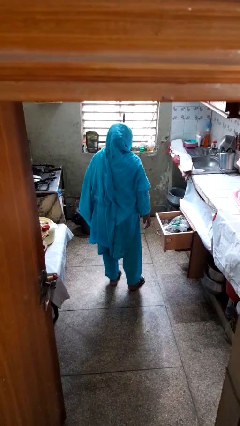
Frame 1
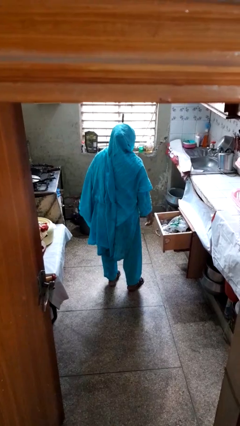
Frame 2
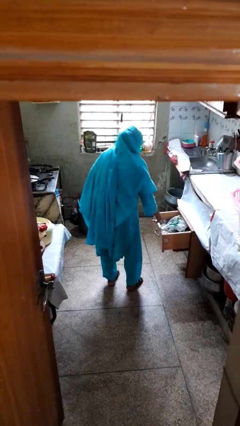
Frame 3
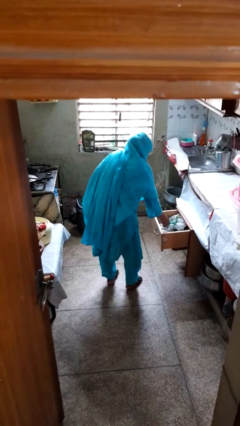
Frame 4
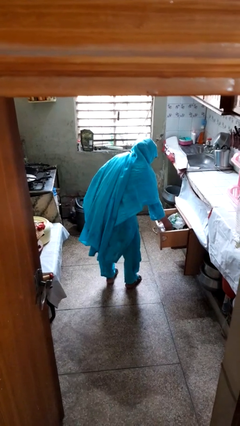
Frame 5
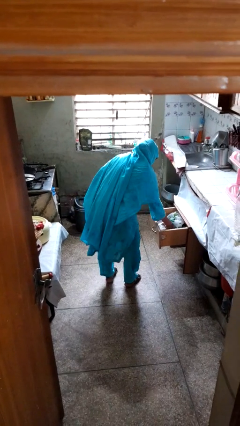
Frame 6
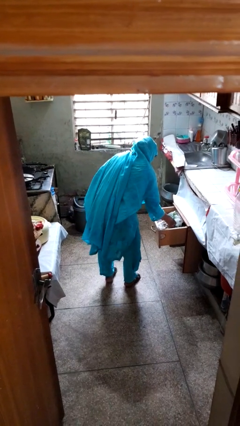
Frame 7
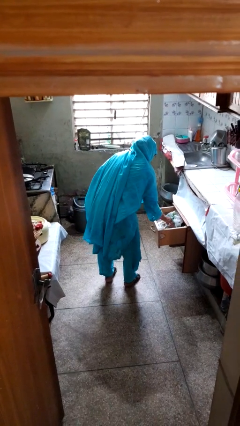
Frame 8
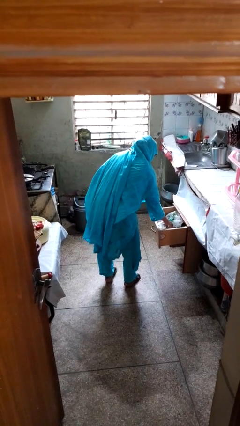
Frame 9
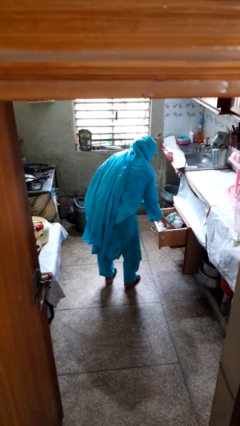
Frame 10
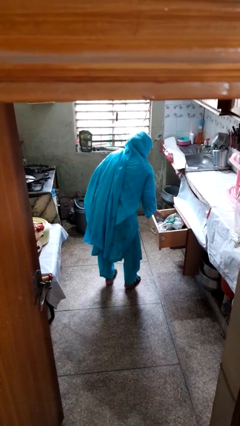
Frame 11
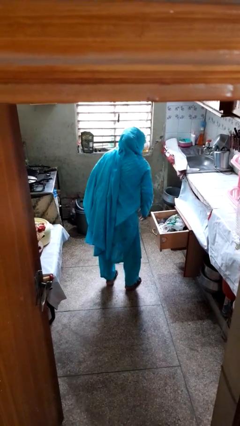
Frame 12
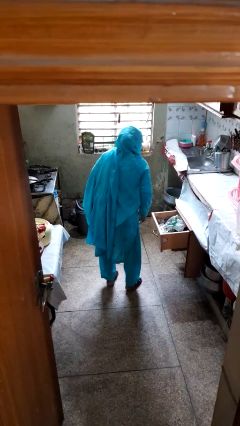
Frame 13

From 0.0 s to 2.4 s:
person searches in kitchen drawer

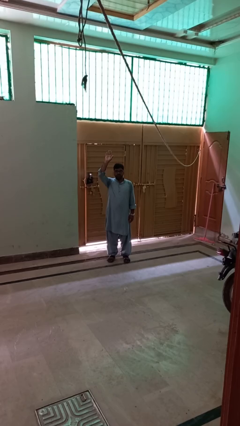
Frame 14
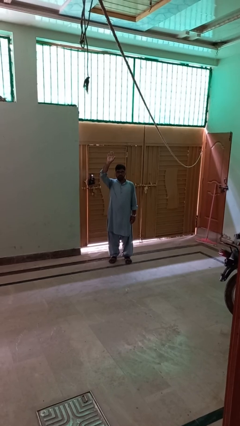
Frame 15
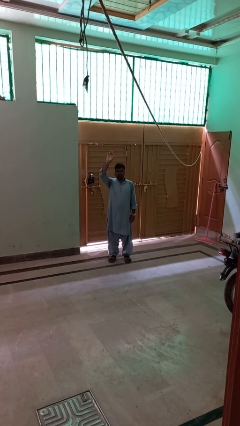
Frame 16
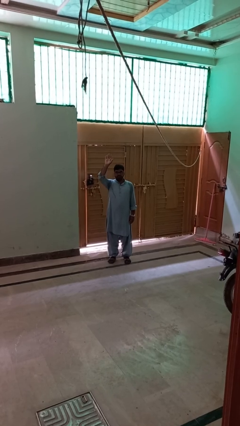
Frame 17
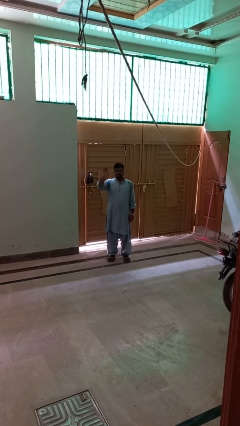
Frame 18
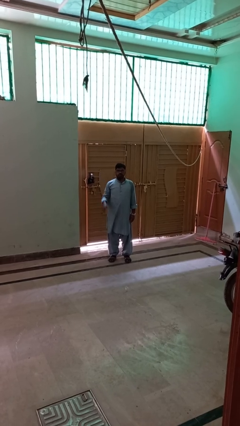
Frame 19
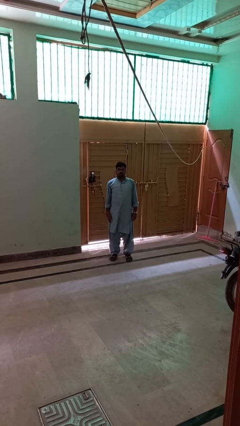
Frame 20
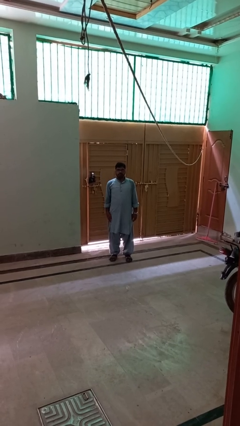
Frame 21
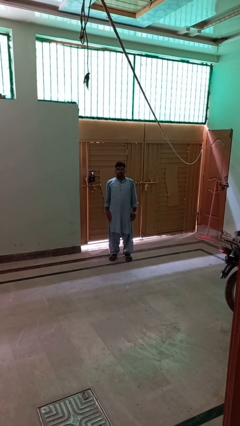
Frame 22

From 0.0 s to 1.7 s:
person gestures lower hand

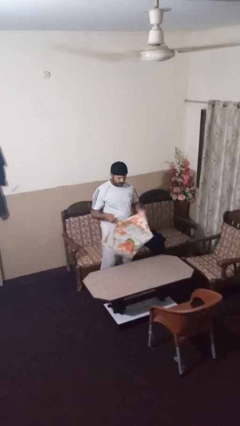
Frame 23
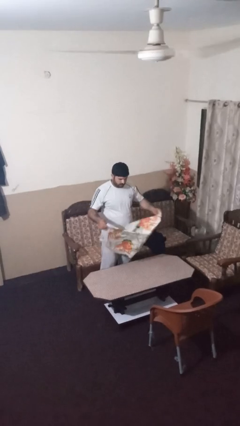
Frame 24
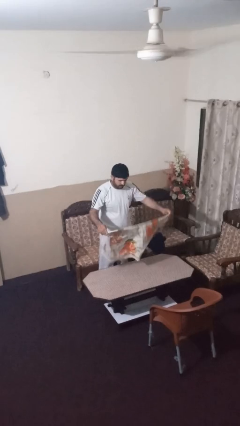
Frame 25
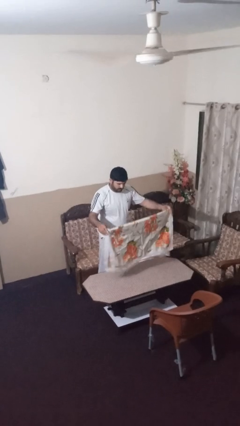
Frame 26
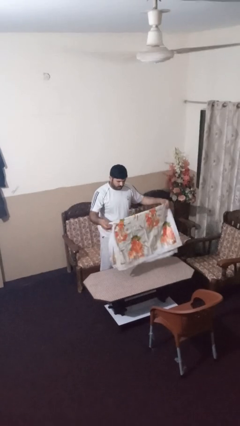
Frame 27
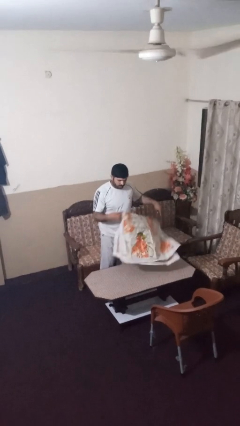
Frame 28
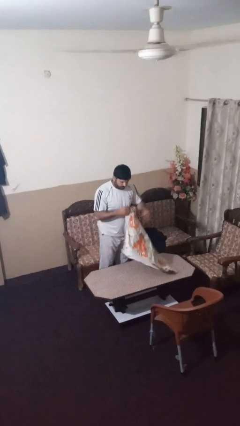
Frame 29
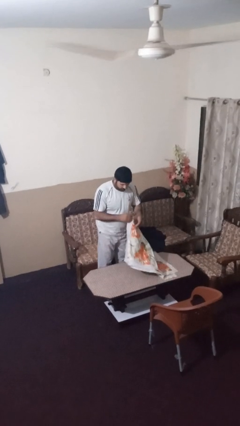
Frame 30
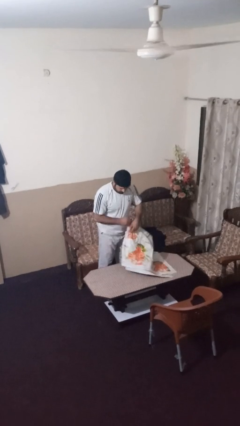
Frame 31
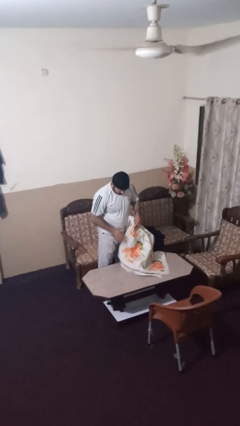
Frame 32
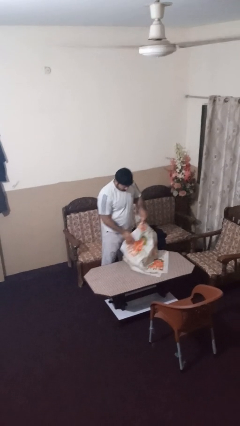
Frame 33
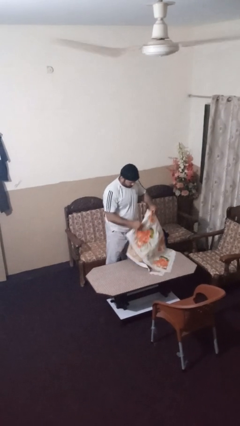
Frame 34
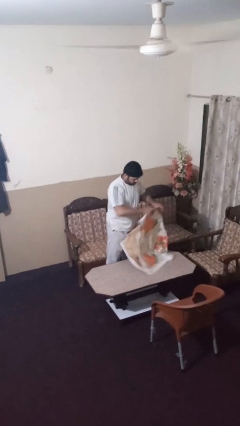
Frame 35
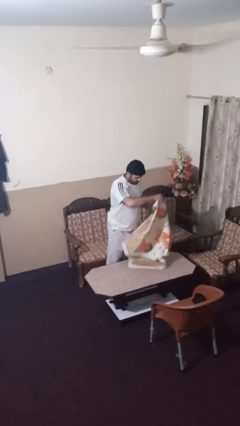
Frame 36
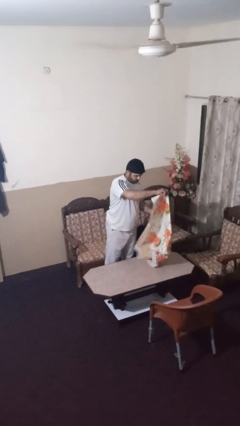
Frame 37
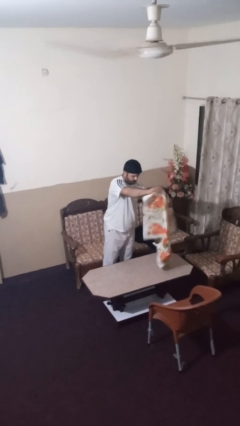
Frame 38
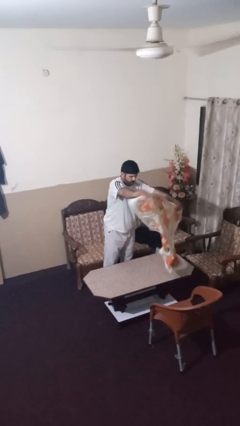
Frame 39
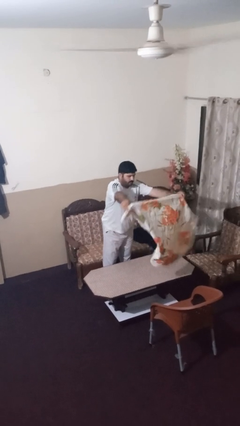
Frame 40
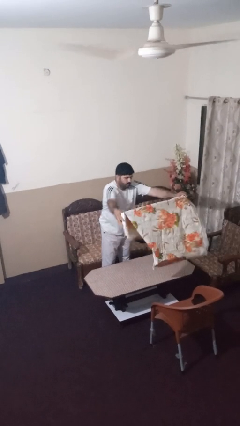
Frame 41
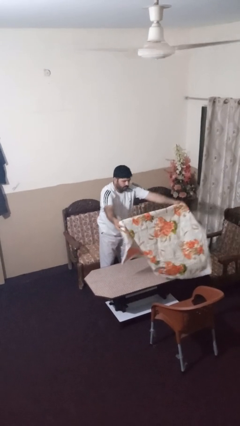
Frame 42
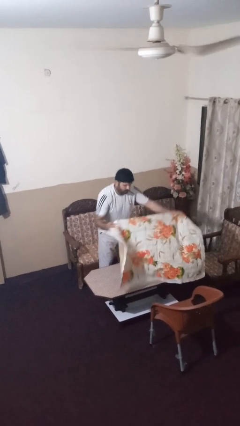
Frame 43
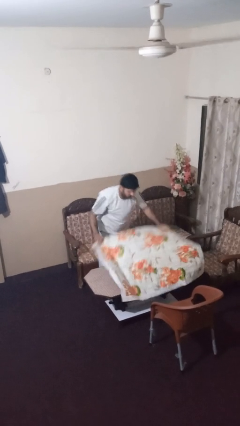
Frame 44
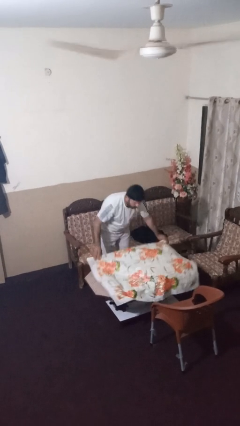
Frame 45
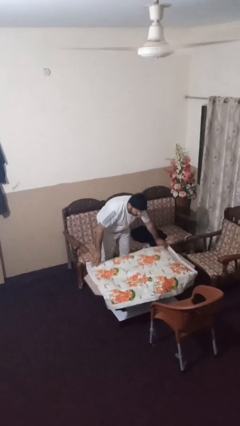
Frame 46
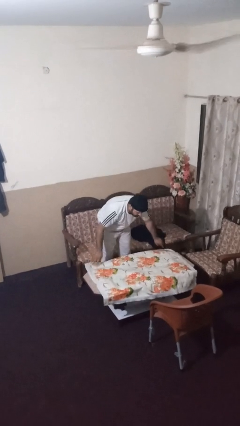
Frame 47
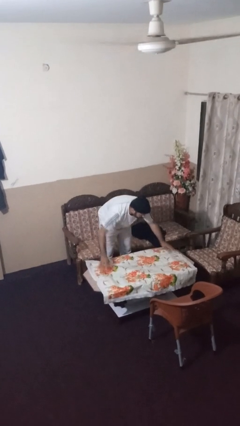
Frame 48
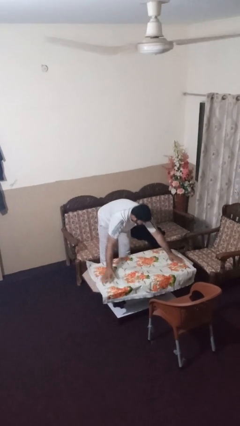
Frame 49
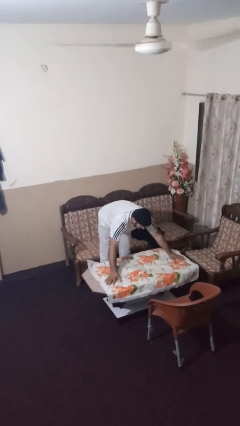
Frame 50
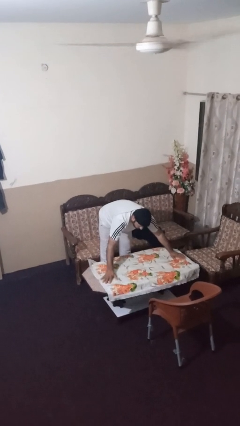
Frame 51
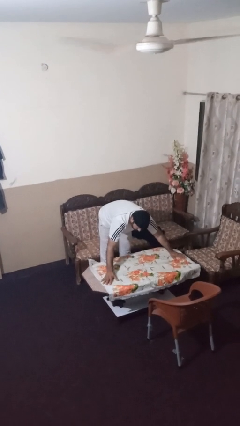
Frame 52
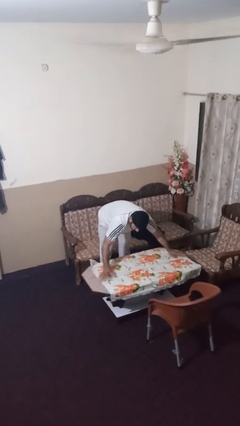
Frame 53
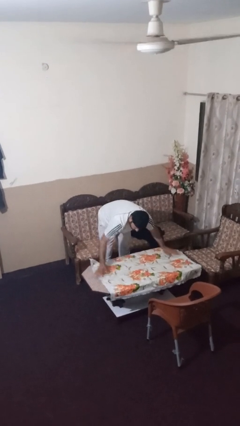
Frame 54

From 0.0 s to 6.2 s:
person spreads tablecloth

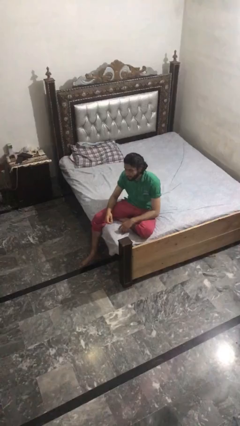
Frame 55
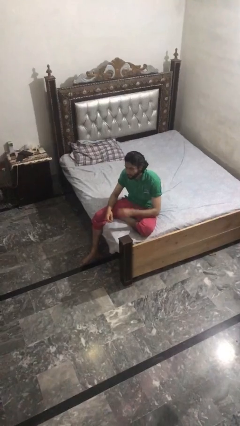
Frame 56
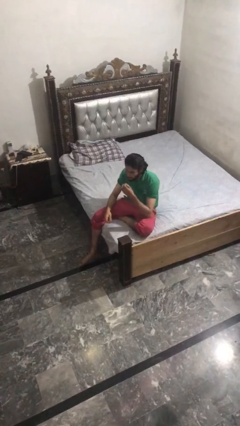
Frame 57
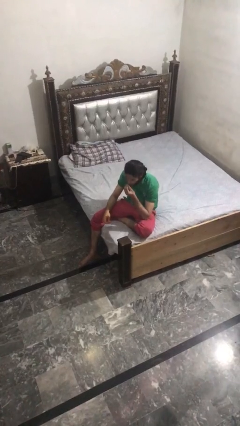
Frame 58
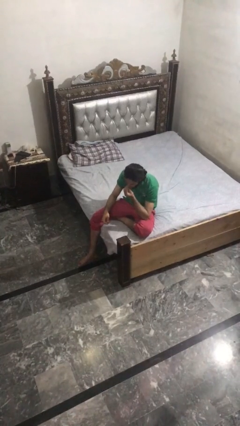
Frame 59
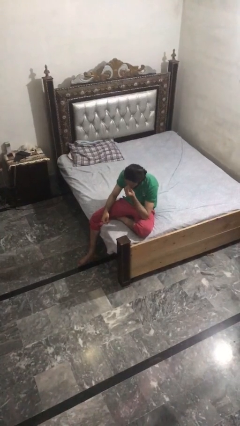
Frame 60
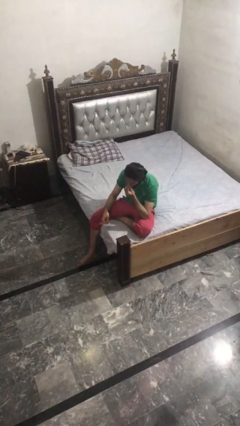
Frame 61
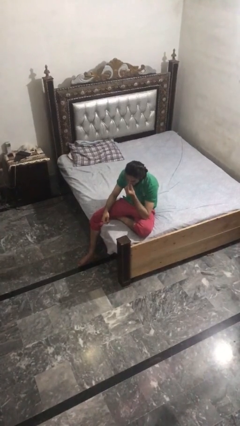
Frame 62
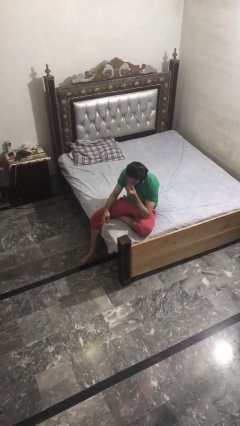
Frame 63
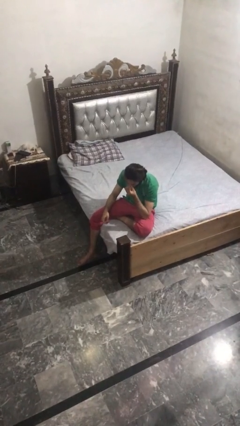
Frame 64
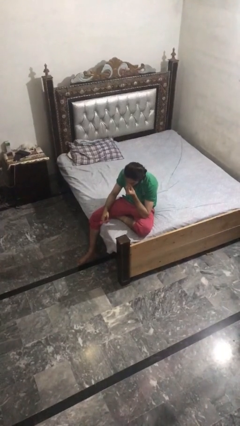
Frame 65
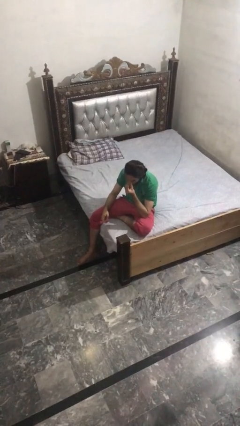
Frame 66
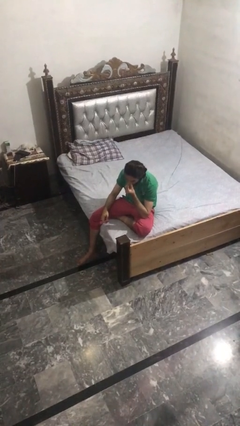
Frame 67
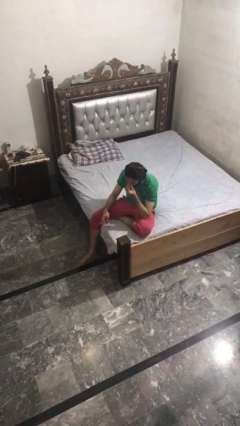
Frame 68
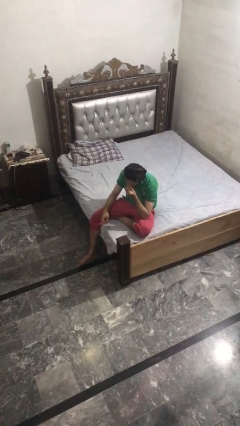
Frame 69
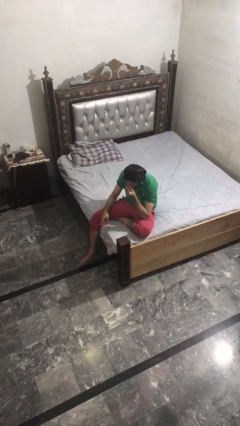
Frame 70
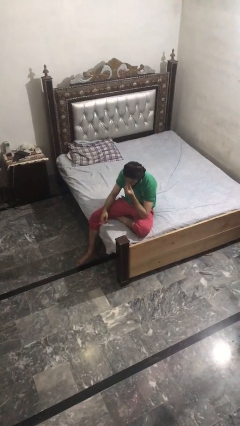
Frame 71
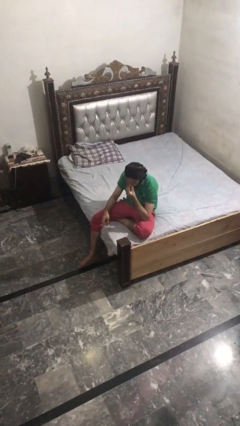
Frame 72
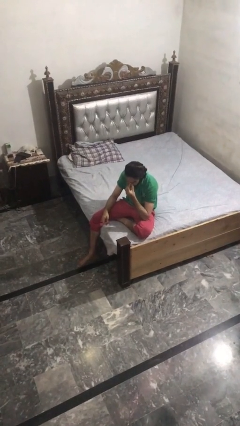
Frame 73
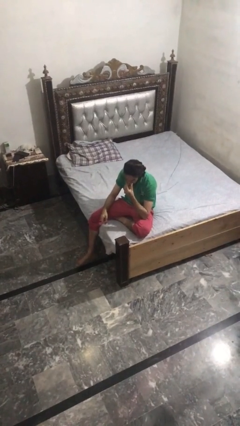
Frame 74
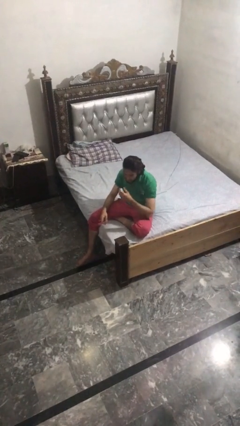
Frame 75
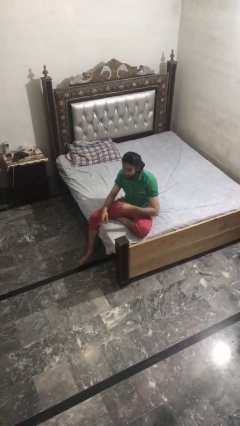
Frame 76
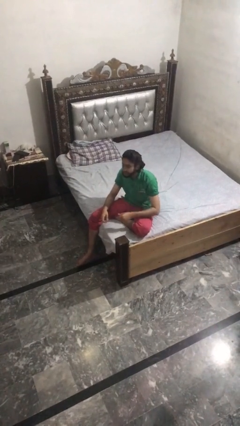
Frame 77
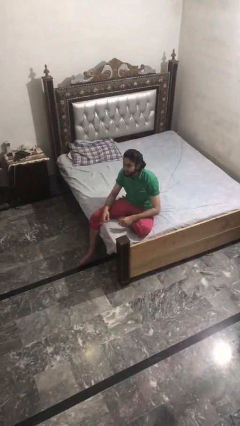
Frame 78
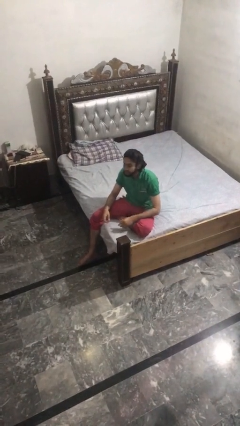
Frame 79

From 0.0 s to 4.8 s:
person scratches face

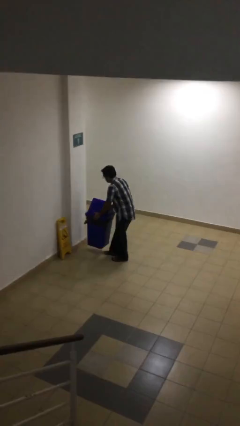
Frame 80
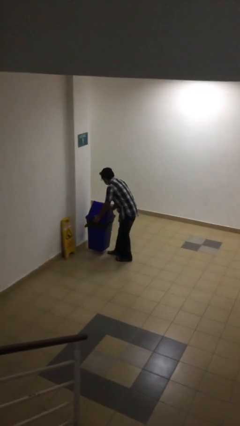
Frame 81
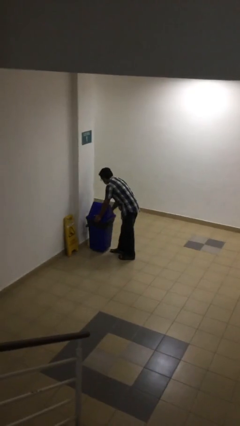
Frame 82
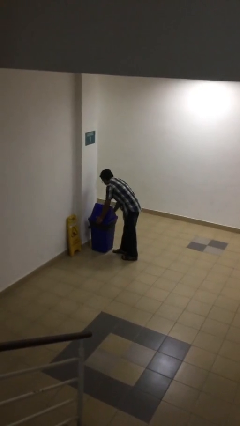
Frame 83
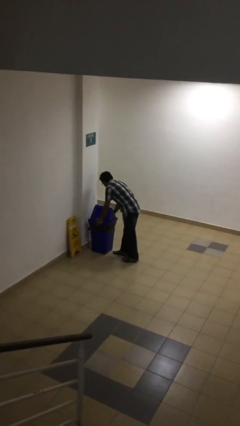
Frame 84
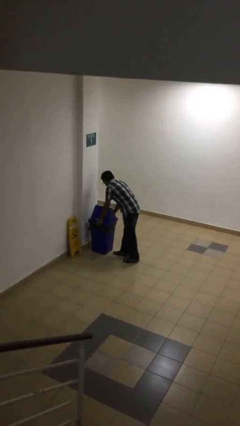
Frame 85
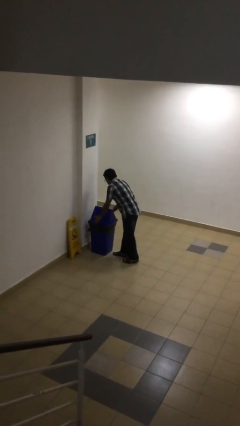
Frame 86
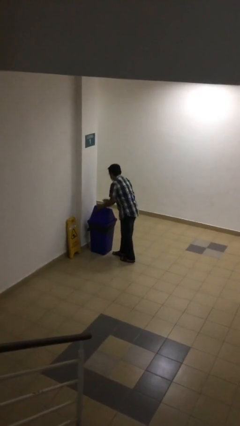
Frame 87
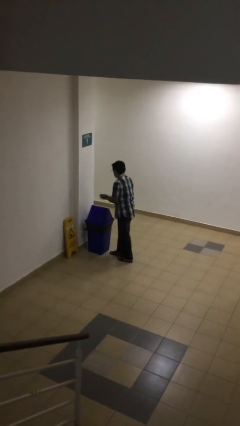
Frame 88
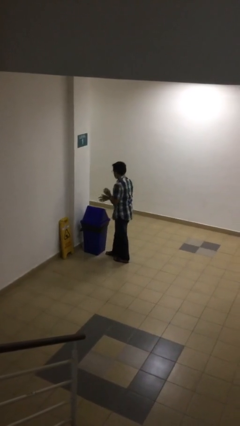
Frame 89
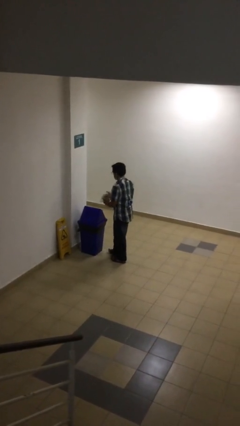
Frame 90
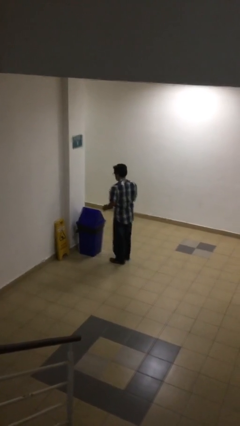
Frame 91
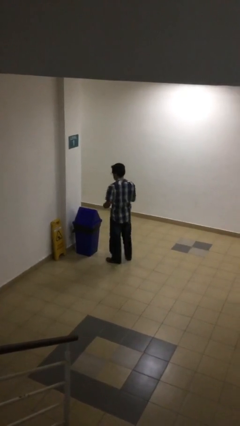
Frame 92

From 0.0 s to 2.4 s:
person puts down object on floor
